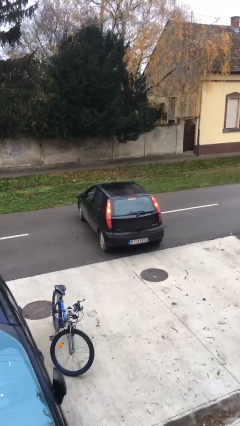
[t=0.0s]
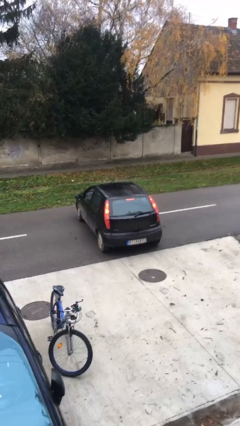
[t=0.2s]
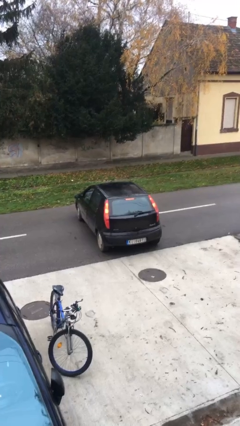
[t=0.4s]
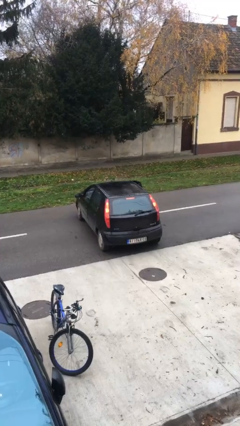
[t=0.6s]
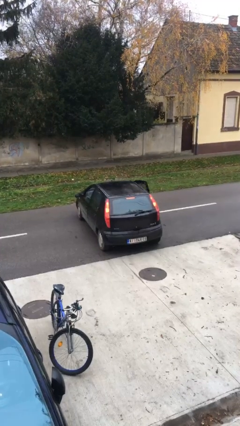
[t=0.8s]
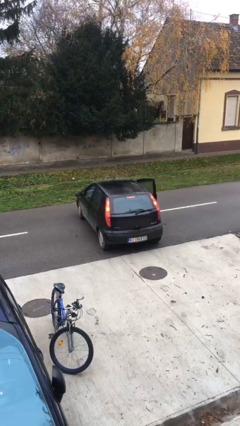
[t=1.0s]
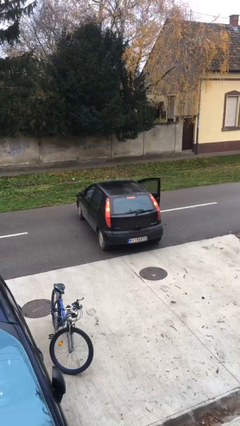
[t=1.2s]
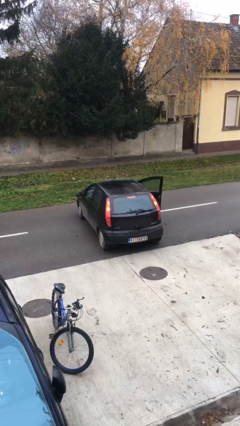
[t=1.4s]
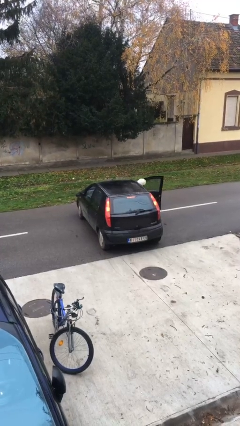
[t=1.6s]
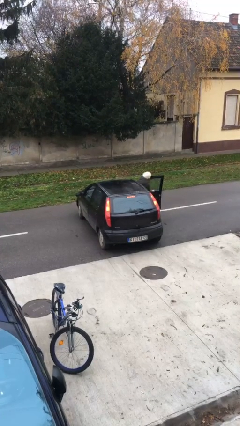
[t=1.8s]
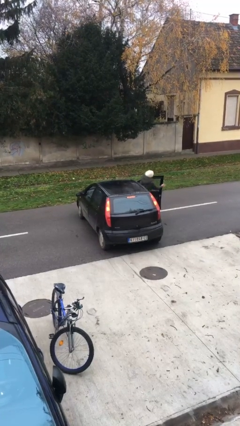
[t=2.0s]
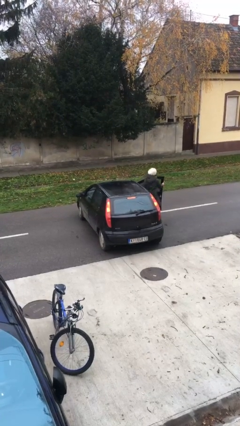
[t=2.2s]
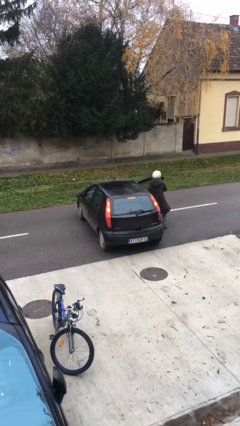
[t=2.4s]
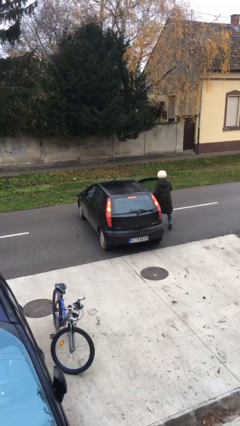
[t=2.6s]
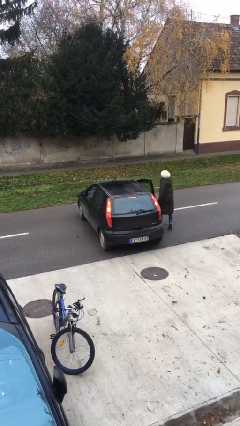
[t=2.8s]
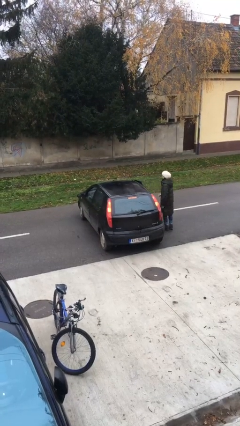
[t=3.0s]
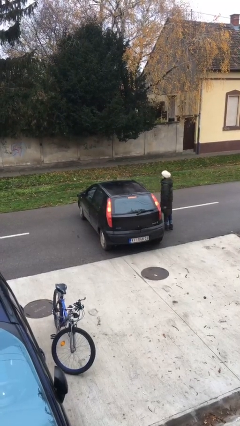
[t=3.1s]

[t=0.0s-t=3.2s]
car drops off person

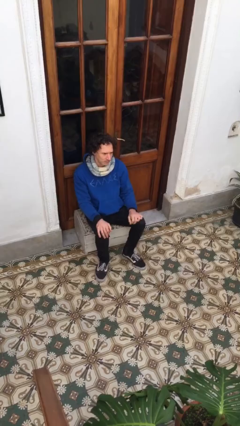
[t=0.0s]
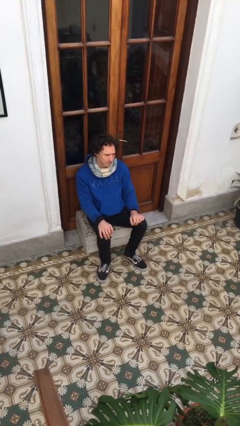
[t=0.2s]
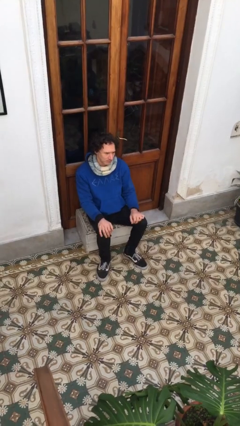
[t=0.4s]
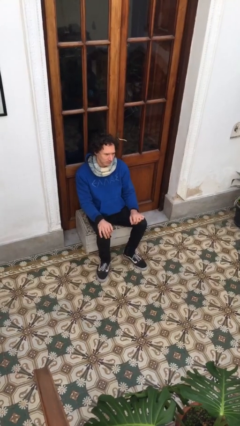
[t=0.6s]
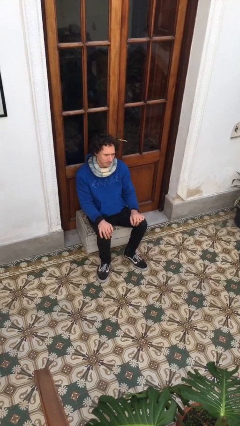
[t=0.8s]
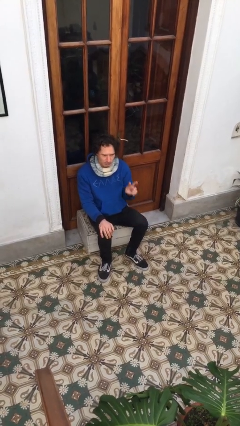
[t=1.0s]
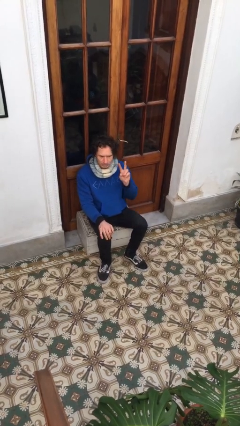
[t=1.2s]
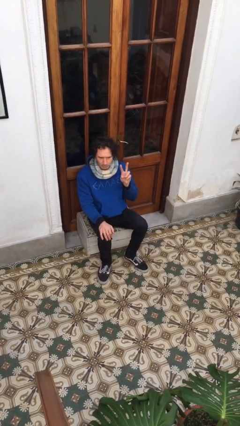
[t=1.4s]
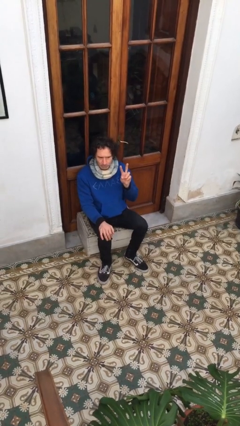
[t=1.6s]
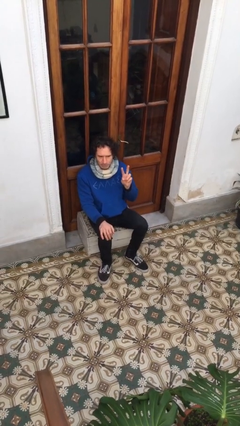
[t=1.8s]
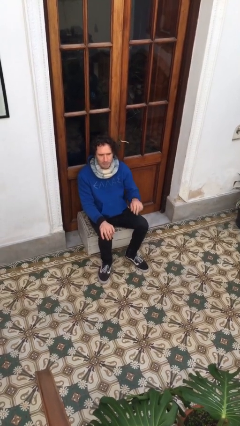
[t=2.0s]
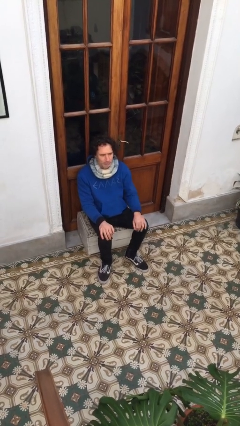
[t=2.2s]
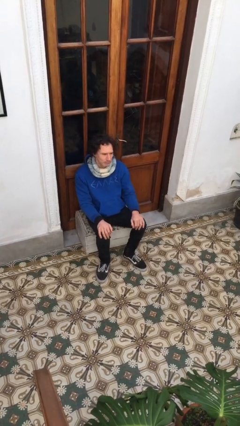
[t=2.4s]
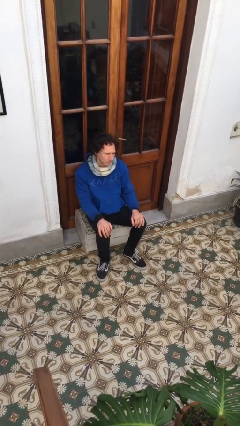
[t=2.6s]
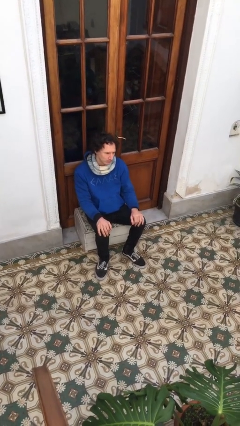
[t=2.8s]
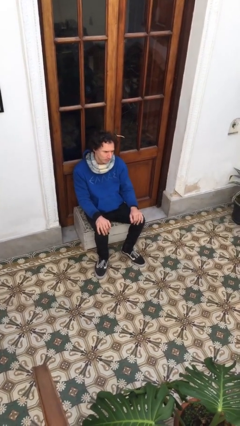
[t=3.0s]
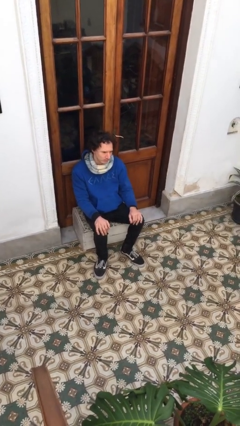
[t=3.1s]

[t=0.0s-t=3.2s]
person gestures peace

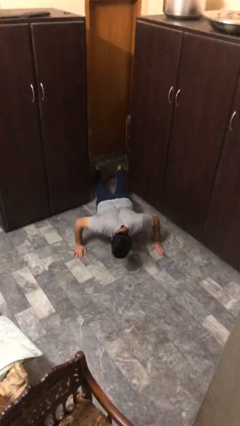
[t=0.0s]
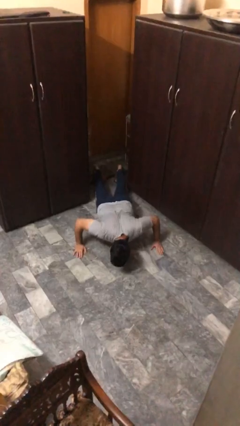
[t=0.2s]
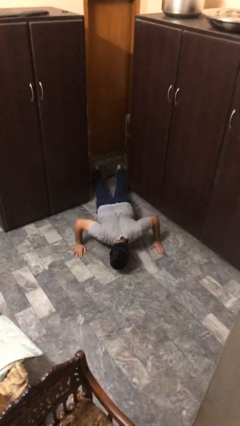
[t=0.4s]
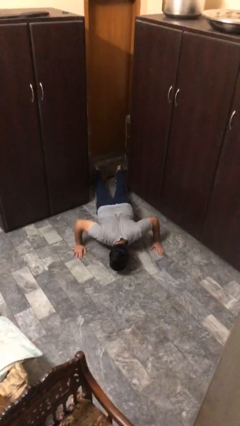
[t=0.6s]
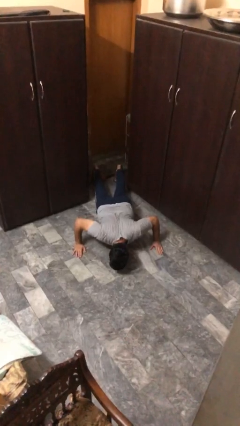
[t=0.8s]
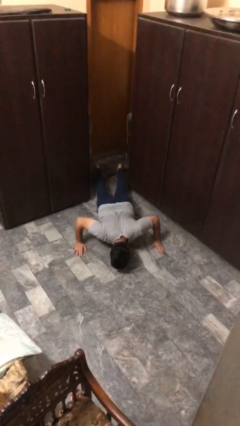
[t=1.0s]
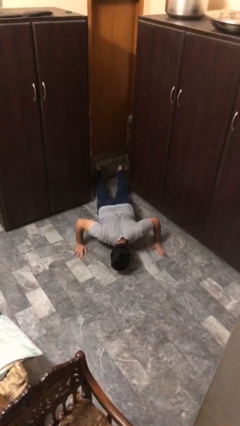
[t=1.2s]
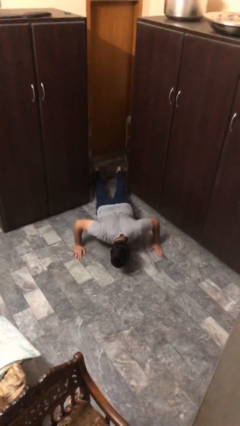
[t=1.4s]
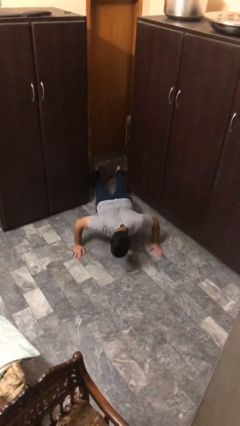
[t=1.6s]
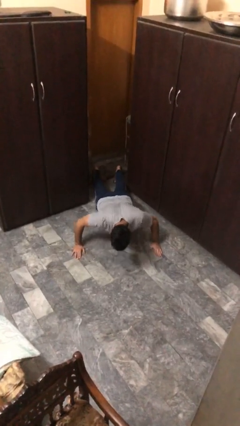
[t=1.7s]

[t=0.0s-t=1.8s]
person exercises with pushup

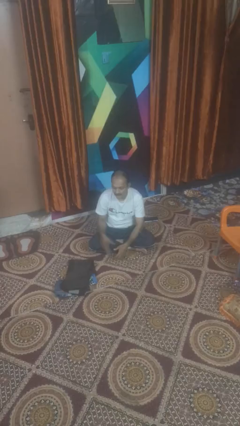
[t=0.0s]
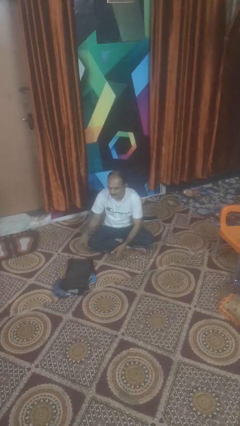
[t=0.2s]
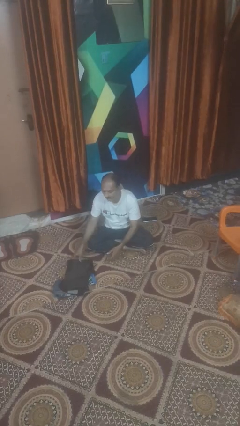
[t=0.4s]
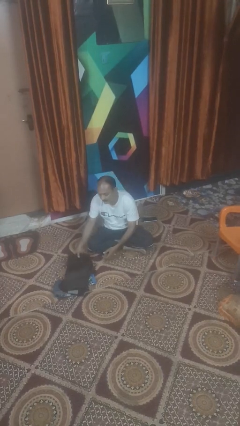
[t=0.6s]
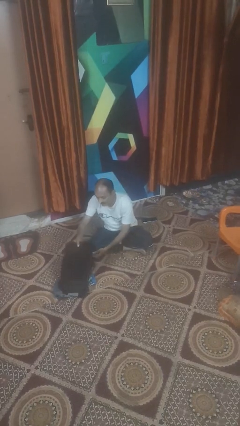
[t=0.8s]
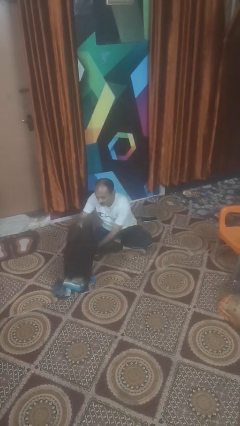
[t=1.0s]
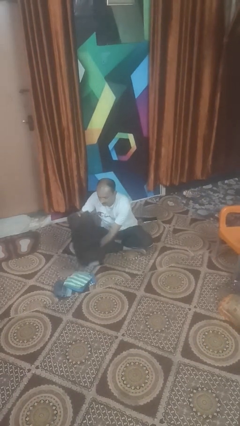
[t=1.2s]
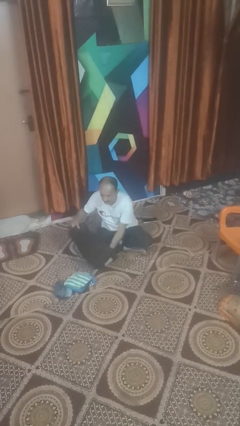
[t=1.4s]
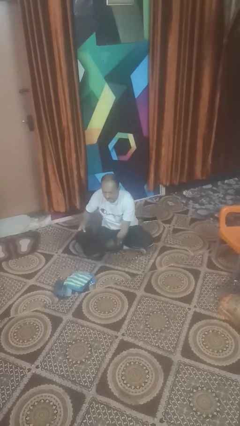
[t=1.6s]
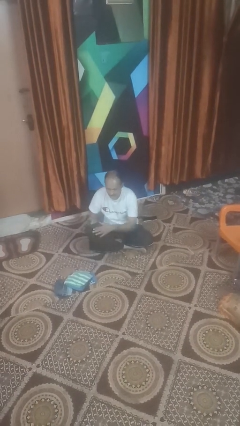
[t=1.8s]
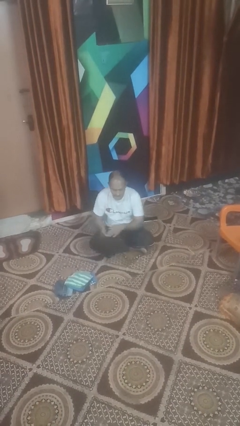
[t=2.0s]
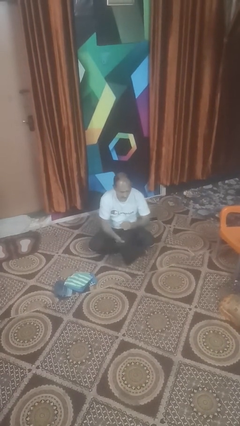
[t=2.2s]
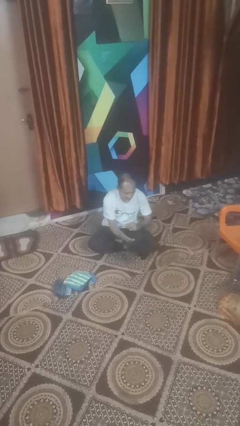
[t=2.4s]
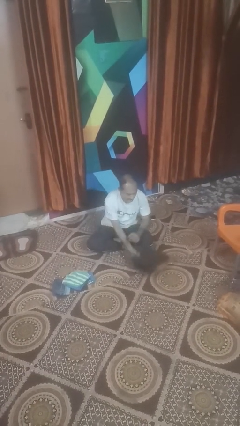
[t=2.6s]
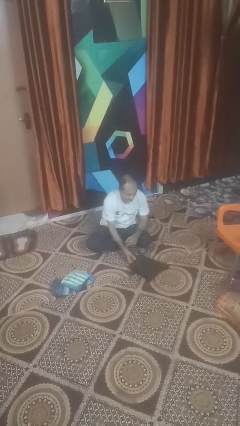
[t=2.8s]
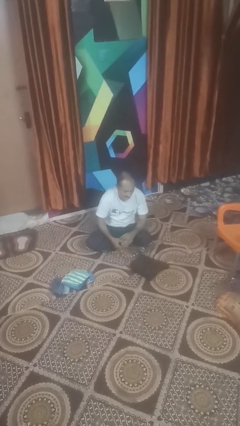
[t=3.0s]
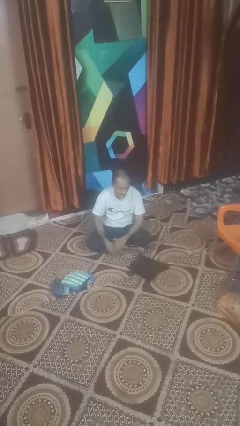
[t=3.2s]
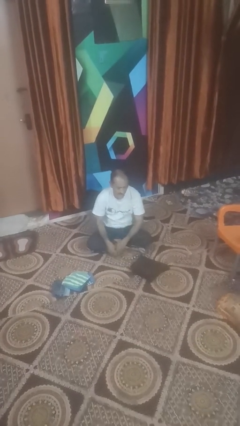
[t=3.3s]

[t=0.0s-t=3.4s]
person folds pants

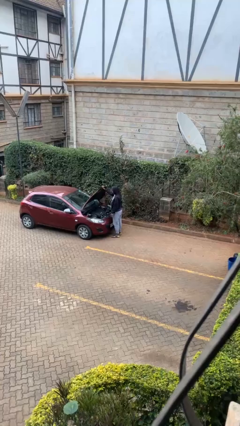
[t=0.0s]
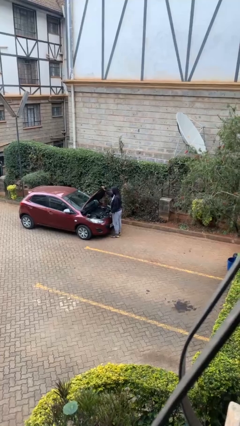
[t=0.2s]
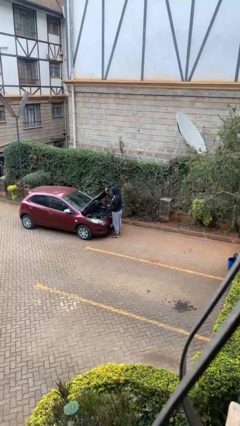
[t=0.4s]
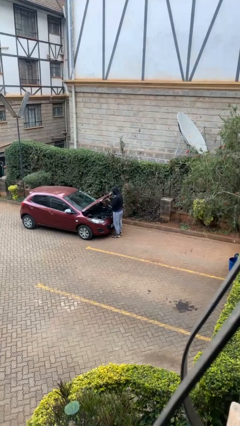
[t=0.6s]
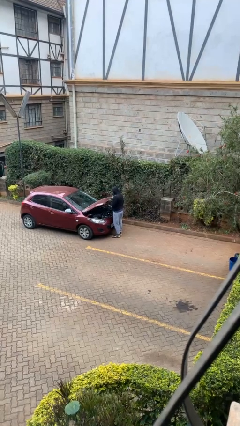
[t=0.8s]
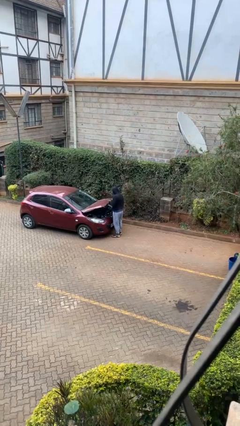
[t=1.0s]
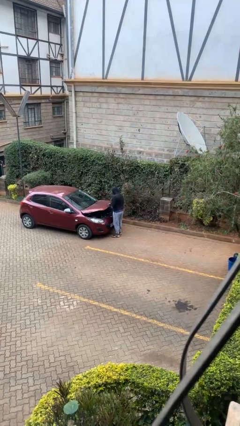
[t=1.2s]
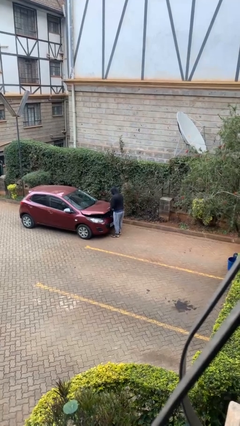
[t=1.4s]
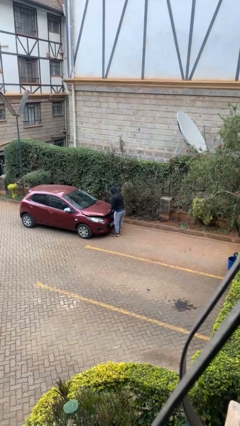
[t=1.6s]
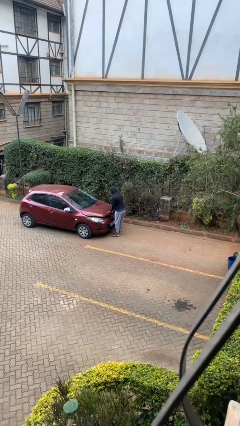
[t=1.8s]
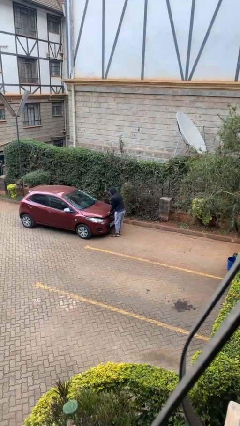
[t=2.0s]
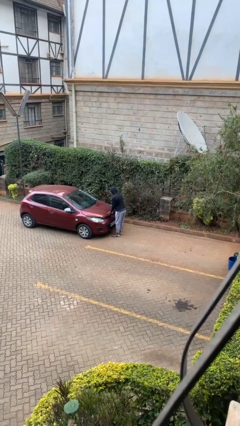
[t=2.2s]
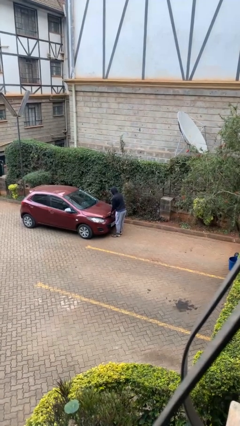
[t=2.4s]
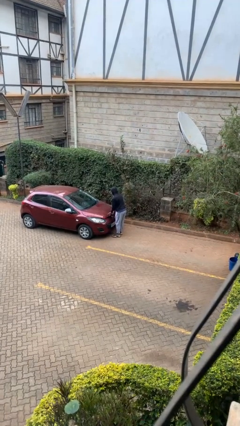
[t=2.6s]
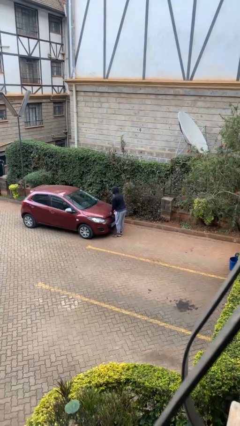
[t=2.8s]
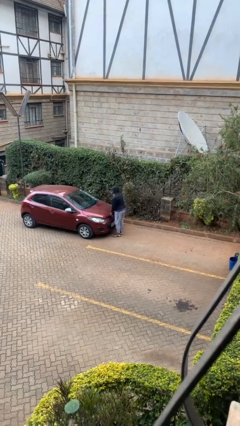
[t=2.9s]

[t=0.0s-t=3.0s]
person closes car hood

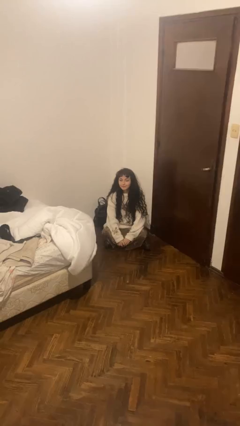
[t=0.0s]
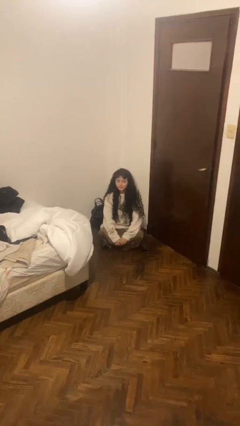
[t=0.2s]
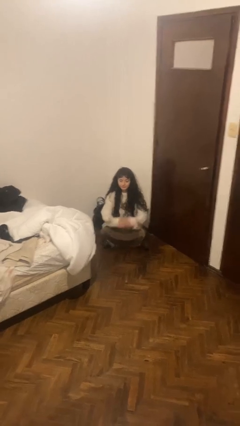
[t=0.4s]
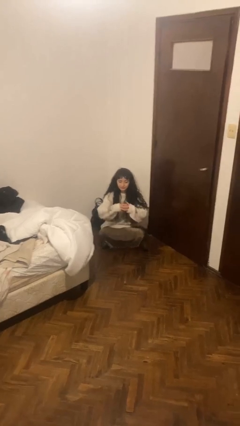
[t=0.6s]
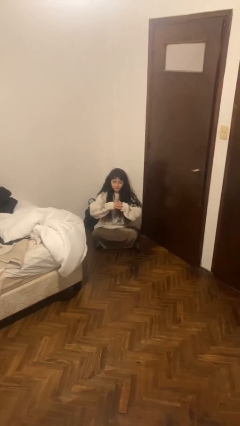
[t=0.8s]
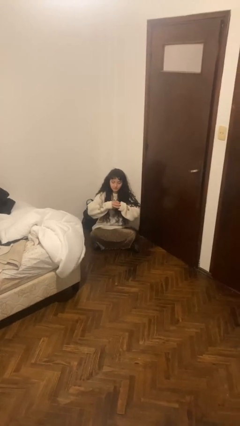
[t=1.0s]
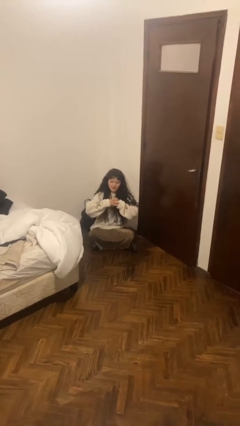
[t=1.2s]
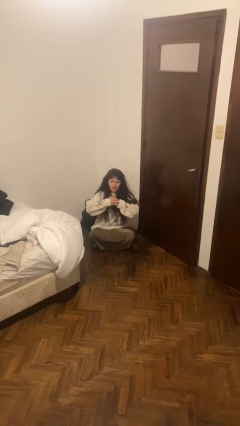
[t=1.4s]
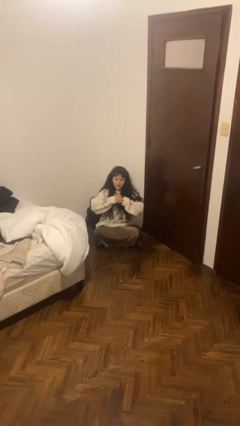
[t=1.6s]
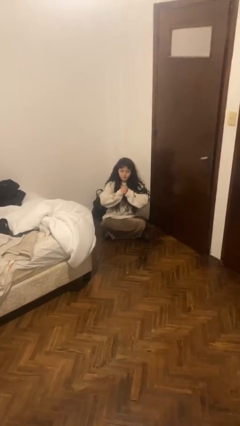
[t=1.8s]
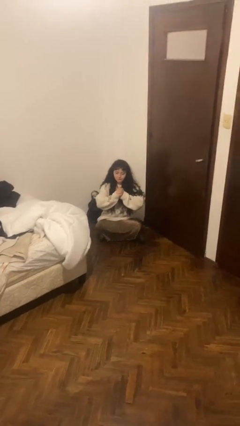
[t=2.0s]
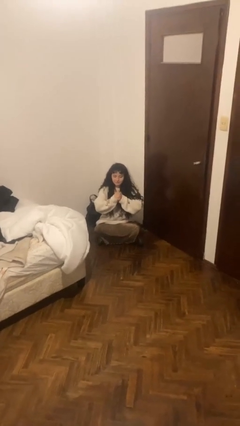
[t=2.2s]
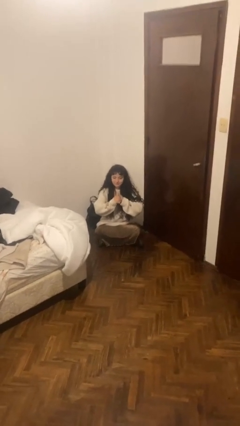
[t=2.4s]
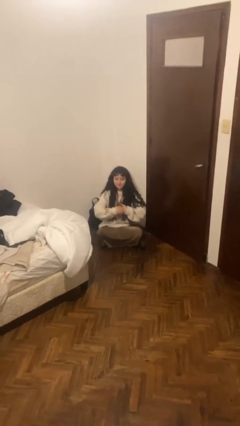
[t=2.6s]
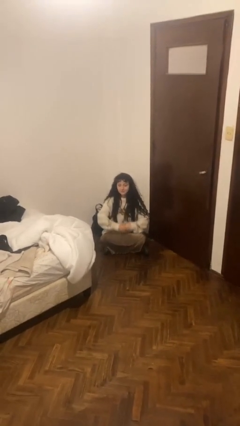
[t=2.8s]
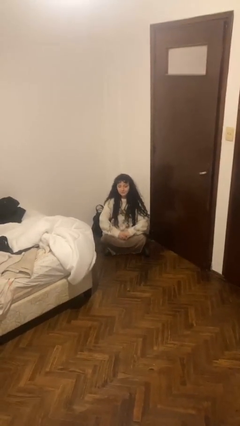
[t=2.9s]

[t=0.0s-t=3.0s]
person cracks knuckles
